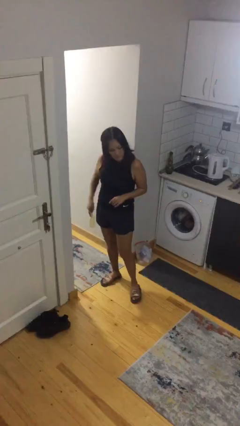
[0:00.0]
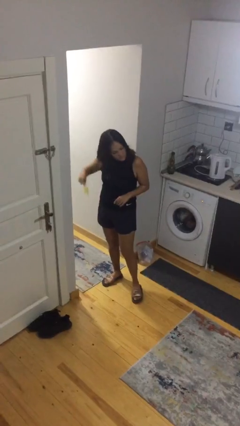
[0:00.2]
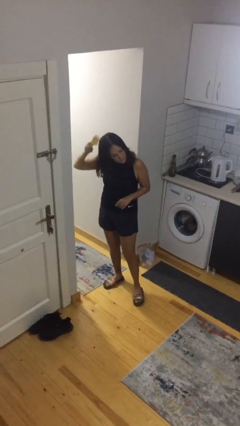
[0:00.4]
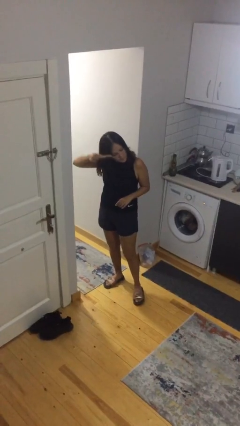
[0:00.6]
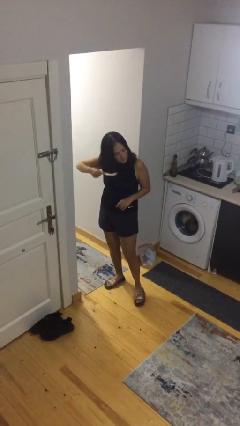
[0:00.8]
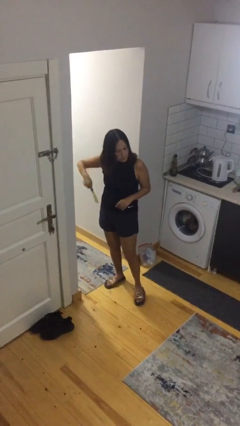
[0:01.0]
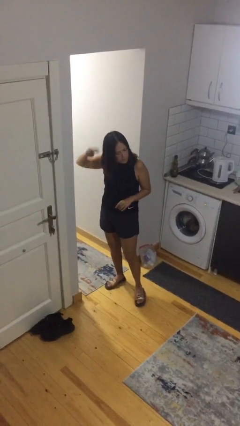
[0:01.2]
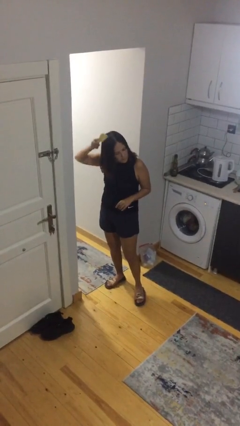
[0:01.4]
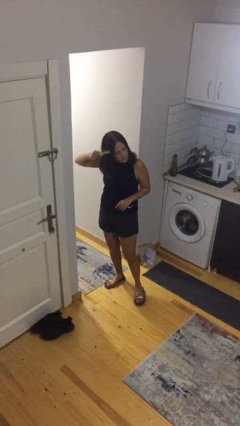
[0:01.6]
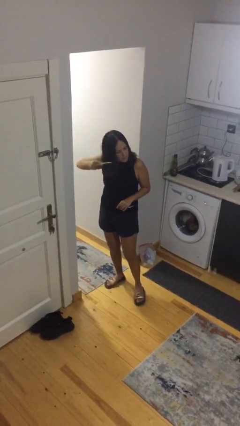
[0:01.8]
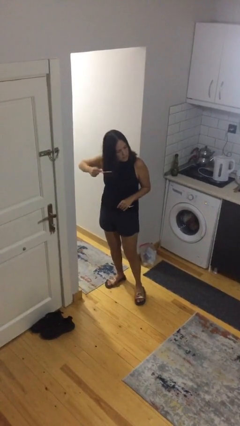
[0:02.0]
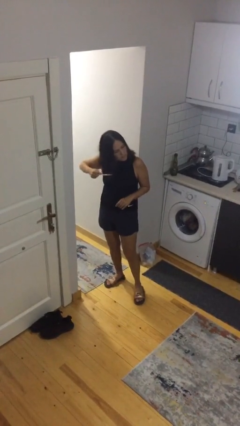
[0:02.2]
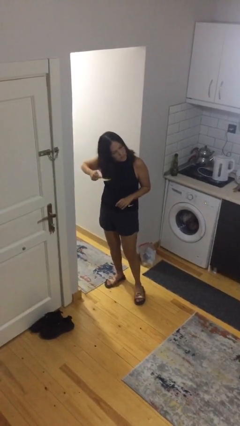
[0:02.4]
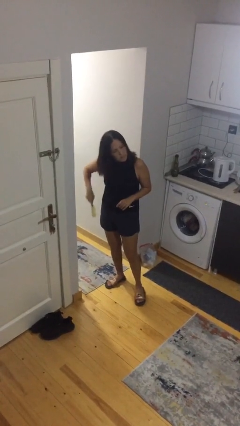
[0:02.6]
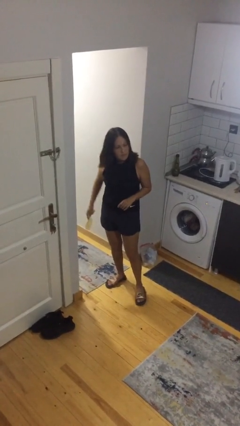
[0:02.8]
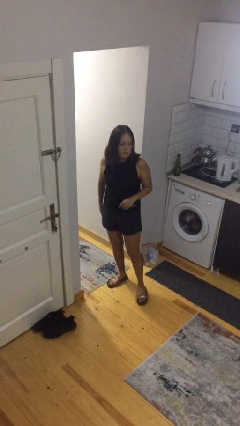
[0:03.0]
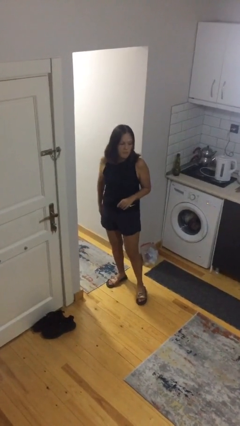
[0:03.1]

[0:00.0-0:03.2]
person brushes hair

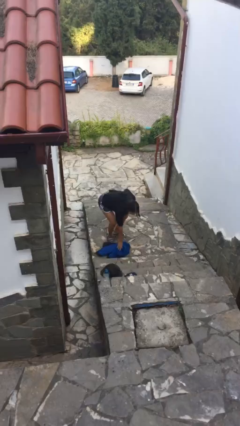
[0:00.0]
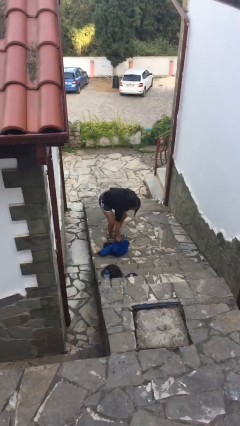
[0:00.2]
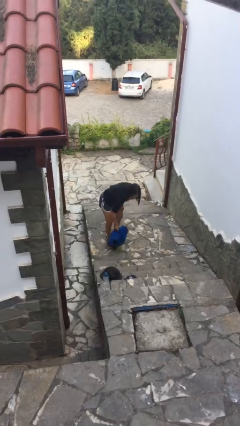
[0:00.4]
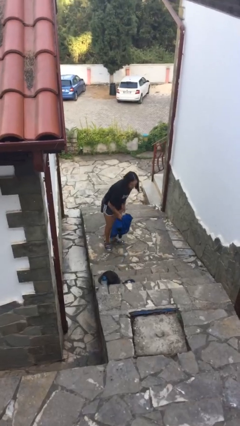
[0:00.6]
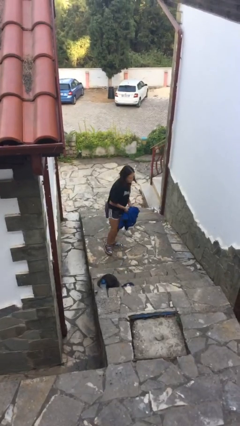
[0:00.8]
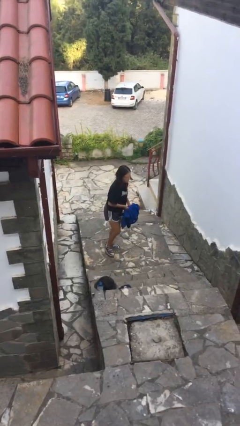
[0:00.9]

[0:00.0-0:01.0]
person picks up object from floor

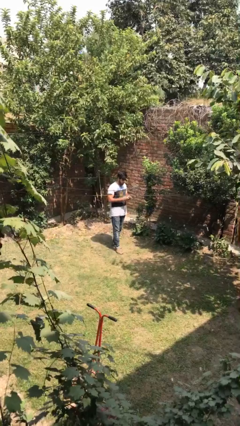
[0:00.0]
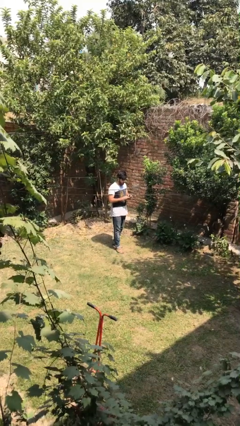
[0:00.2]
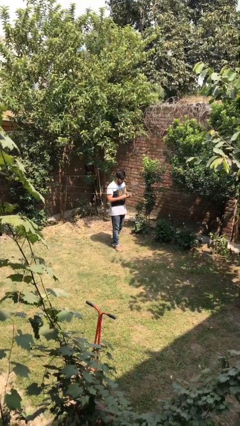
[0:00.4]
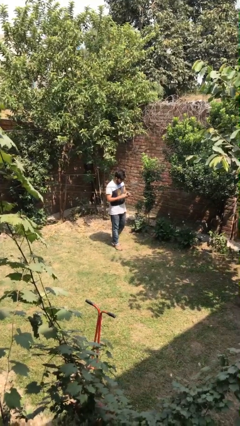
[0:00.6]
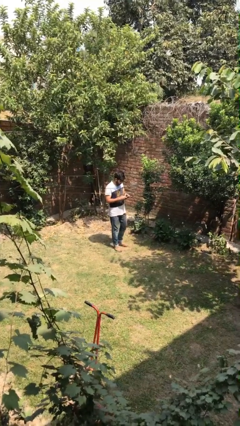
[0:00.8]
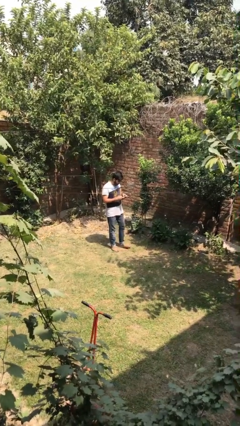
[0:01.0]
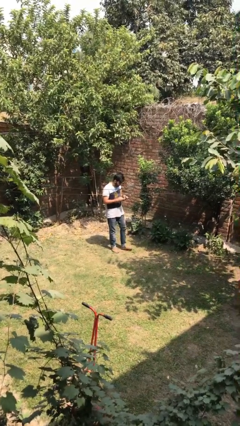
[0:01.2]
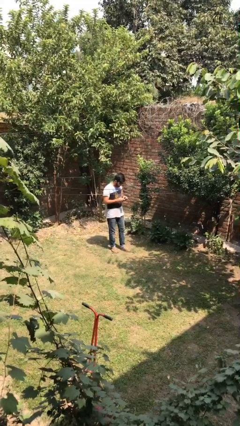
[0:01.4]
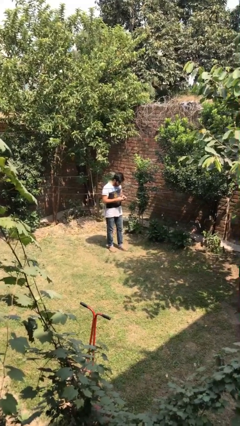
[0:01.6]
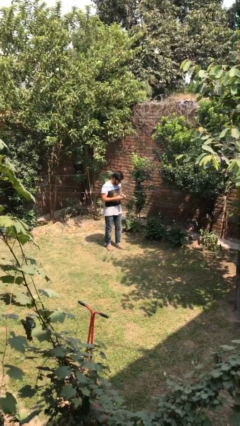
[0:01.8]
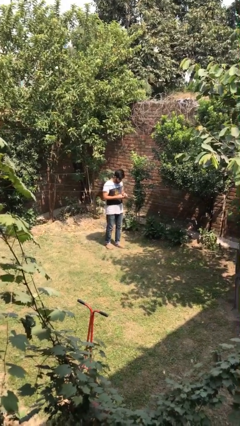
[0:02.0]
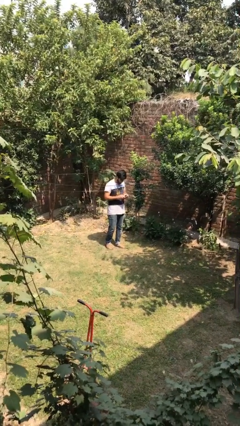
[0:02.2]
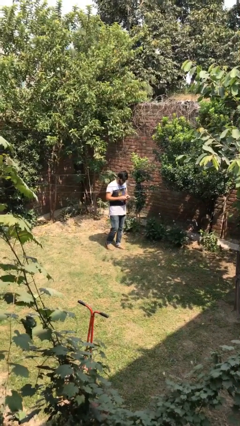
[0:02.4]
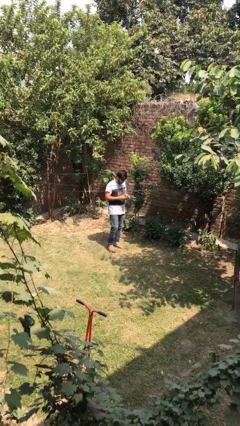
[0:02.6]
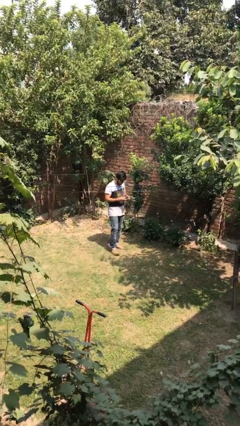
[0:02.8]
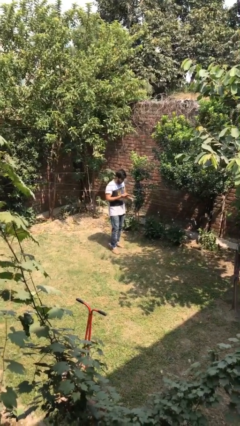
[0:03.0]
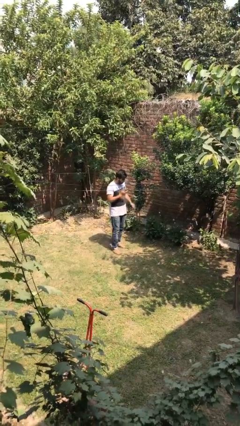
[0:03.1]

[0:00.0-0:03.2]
person texts on phone

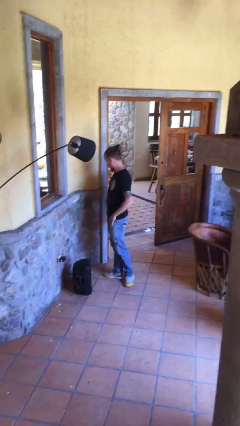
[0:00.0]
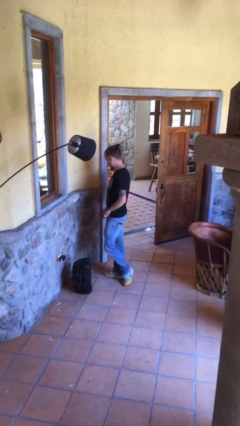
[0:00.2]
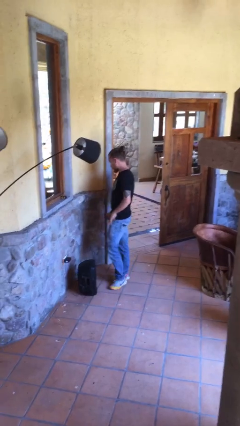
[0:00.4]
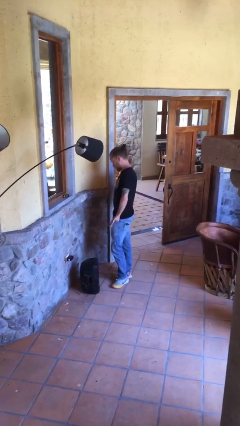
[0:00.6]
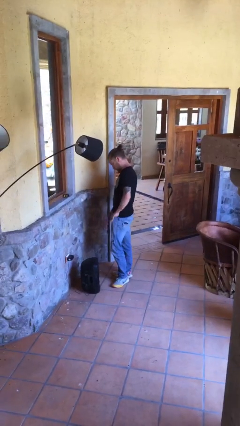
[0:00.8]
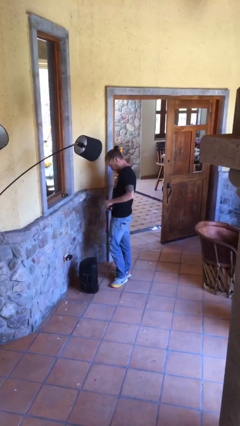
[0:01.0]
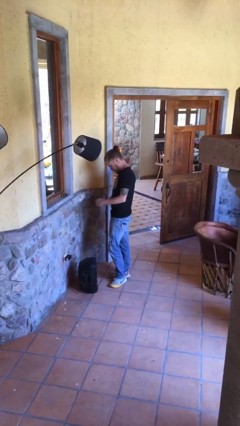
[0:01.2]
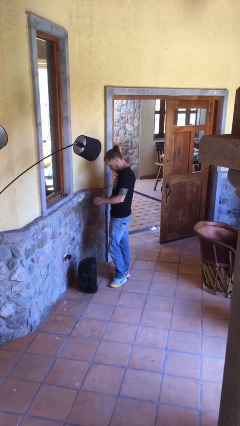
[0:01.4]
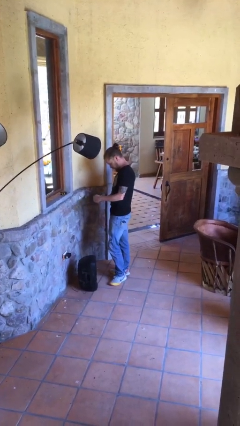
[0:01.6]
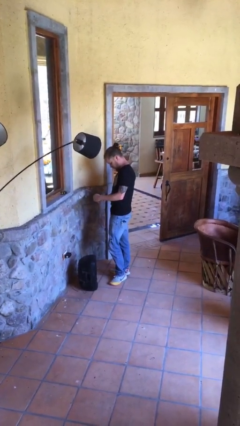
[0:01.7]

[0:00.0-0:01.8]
person takes phone from pocket

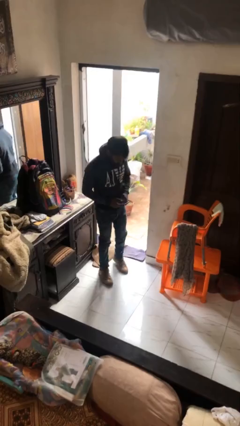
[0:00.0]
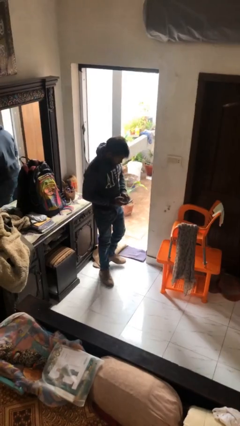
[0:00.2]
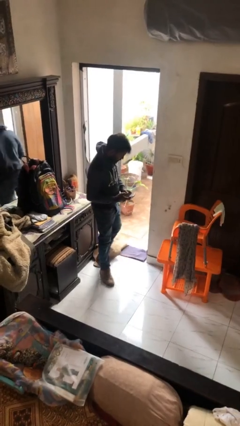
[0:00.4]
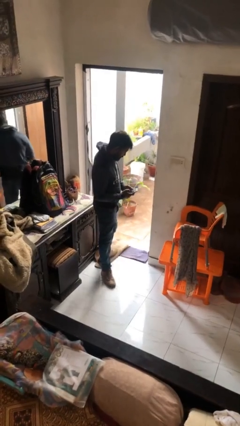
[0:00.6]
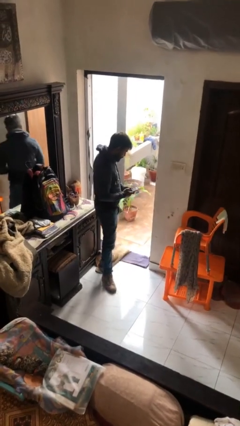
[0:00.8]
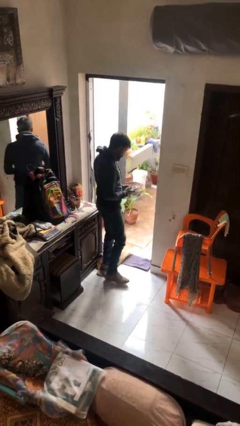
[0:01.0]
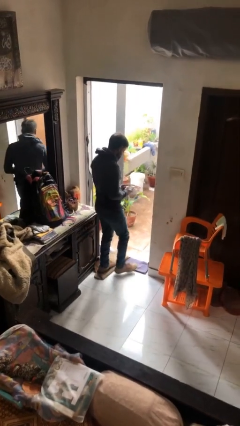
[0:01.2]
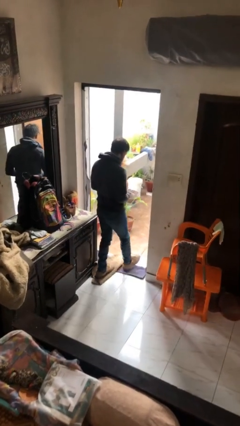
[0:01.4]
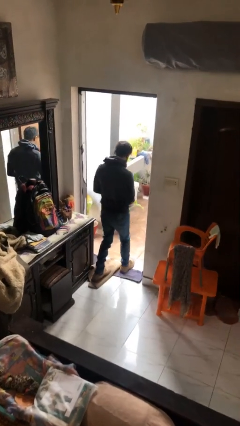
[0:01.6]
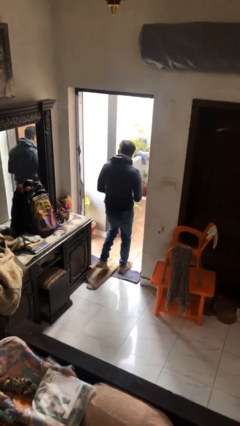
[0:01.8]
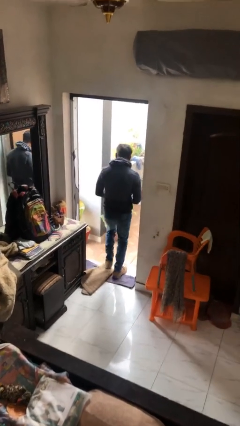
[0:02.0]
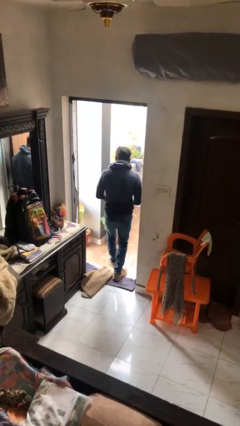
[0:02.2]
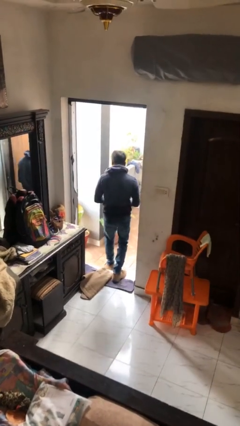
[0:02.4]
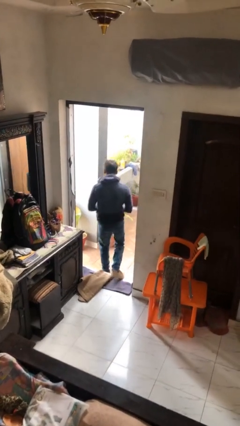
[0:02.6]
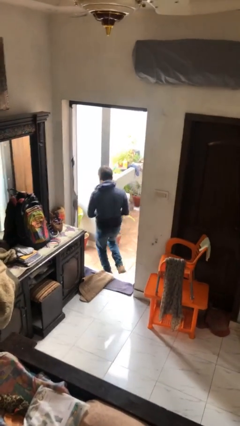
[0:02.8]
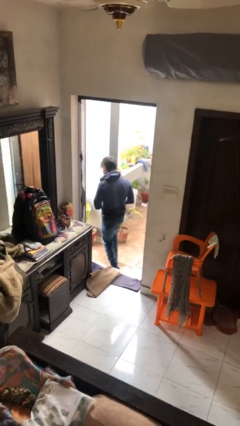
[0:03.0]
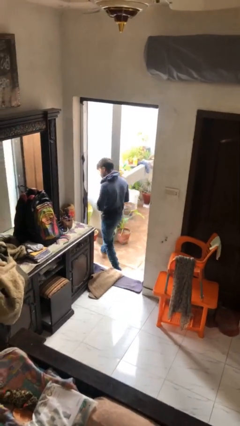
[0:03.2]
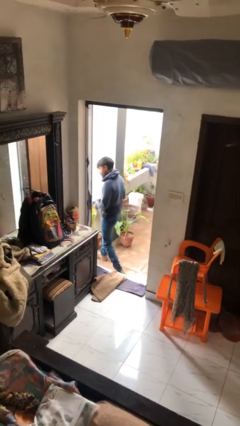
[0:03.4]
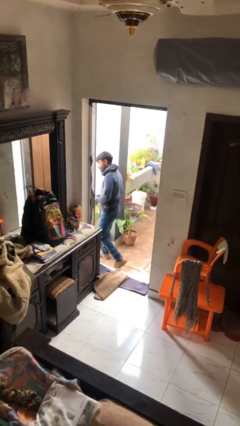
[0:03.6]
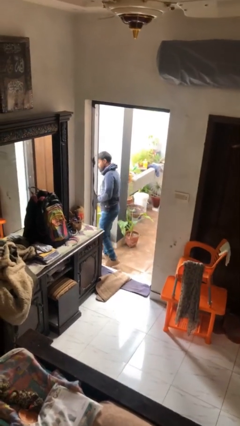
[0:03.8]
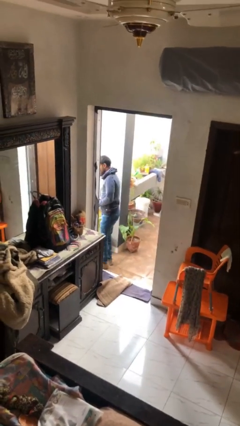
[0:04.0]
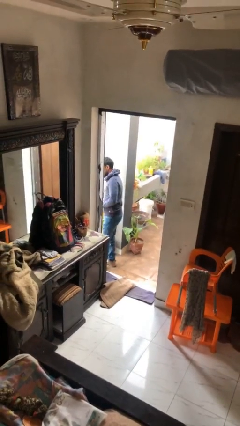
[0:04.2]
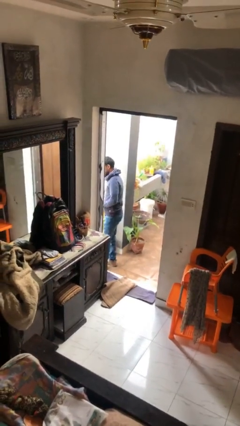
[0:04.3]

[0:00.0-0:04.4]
person exits scene through structure

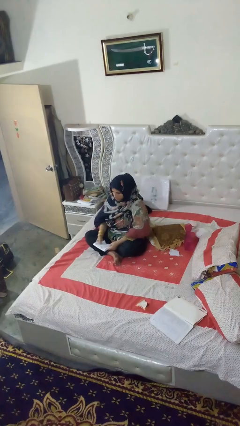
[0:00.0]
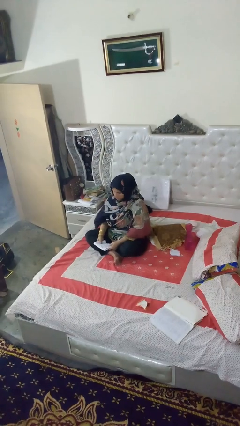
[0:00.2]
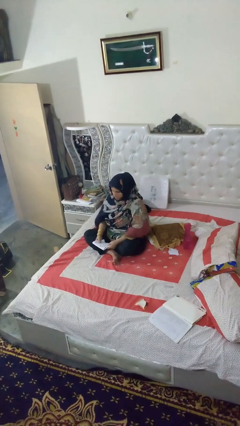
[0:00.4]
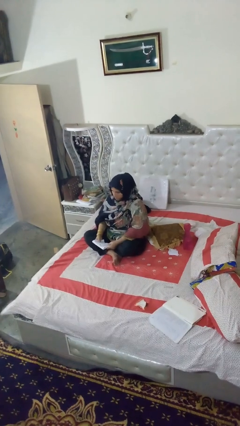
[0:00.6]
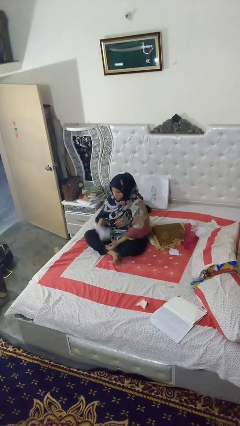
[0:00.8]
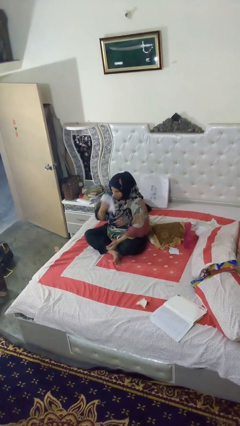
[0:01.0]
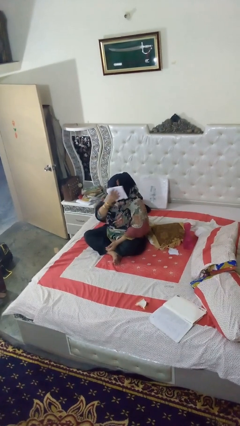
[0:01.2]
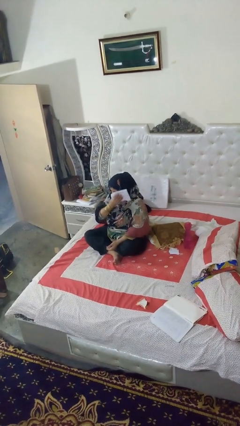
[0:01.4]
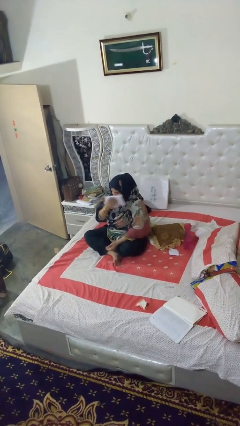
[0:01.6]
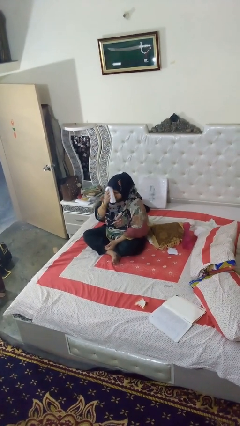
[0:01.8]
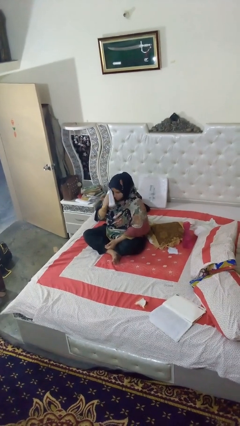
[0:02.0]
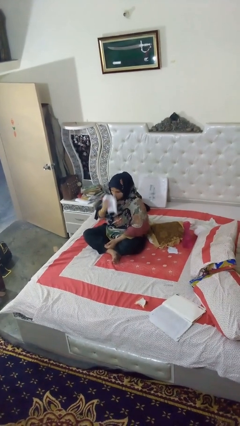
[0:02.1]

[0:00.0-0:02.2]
person wipes mouth with napkin

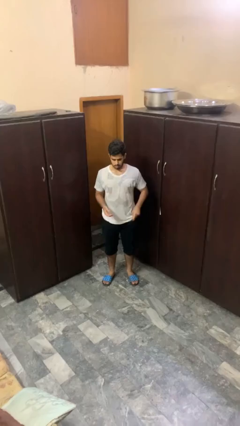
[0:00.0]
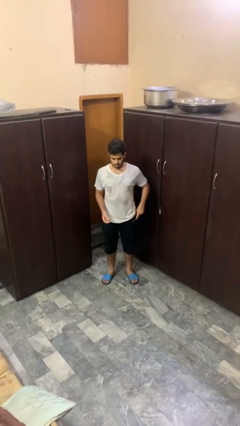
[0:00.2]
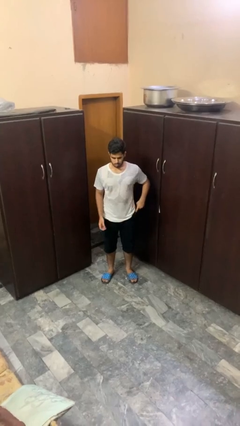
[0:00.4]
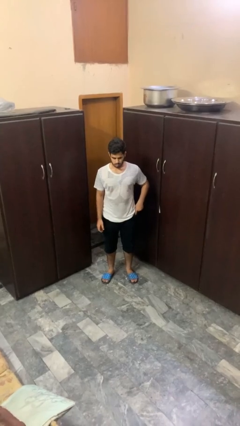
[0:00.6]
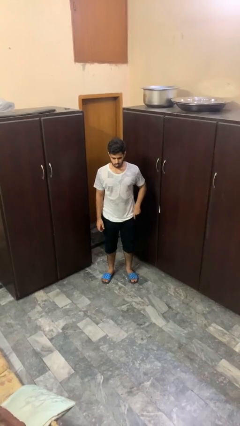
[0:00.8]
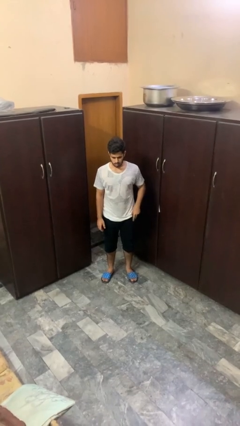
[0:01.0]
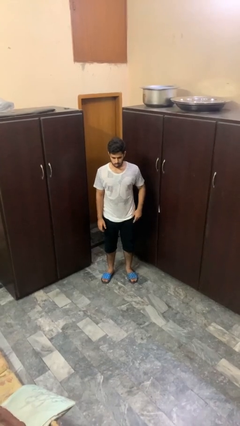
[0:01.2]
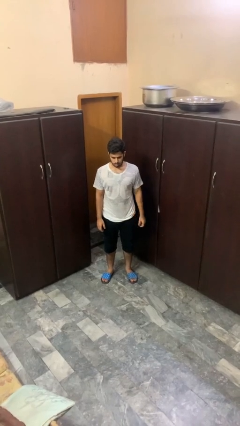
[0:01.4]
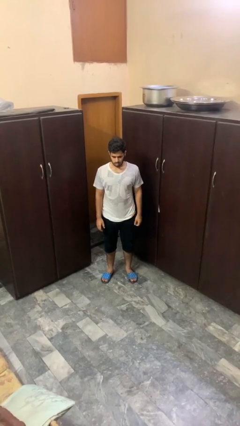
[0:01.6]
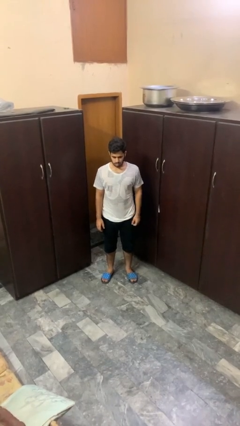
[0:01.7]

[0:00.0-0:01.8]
person puts phone into pocket
